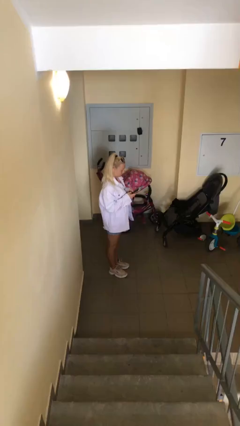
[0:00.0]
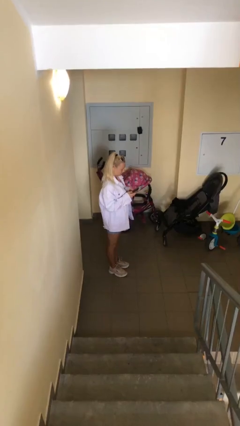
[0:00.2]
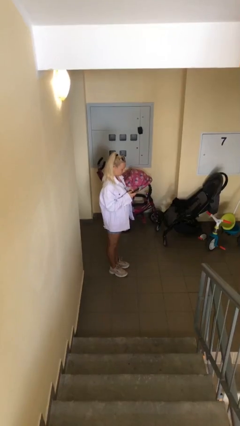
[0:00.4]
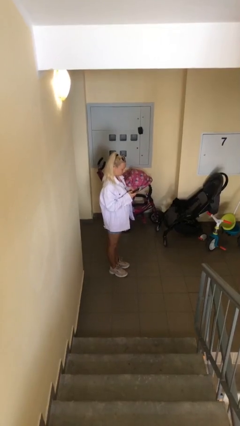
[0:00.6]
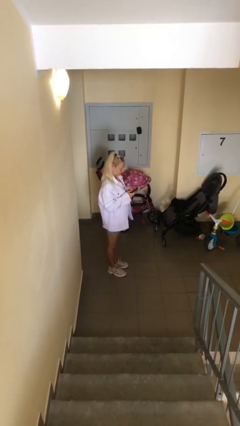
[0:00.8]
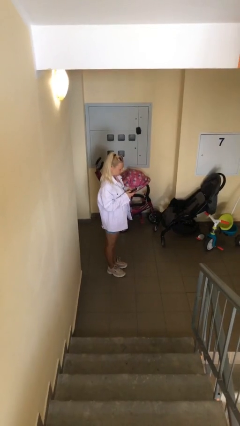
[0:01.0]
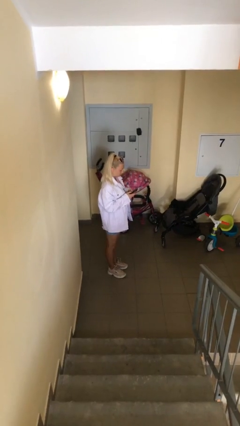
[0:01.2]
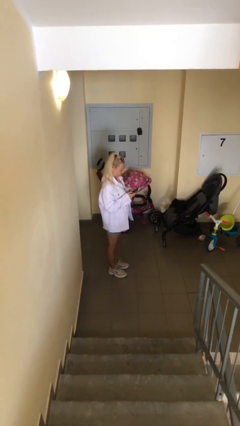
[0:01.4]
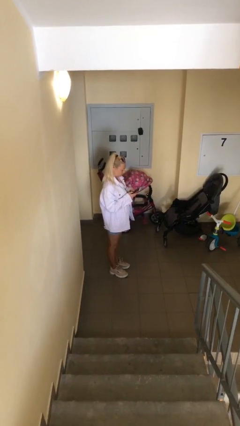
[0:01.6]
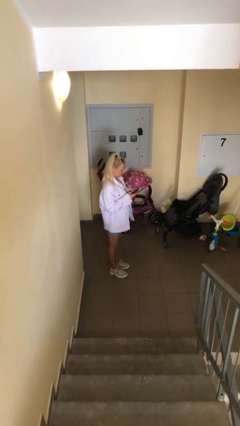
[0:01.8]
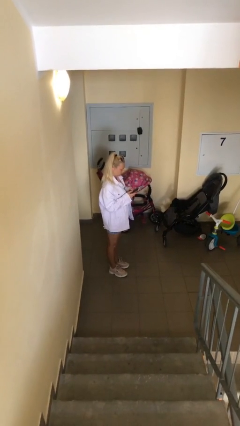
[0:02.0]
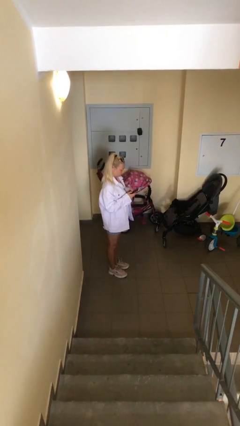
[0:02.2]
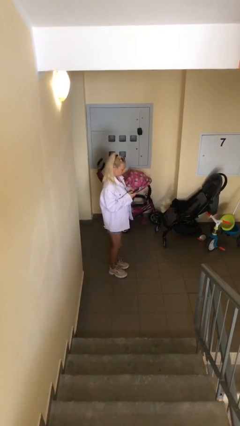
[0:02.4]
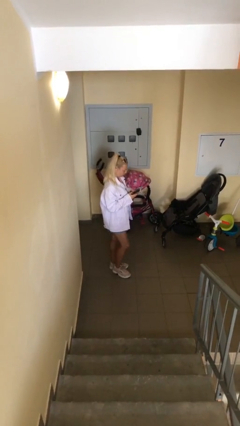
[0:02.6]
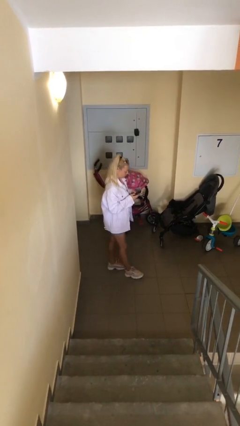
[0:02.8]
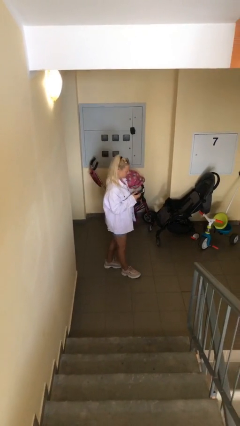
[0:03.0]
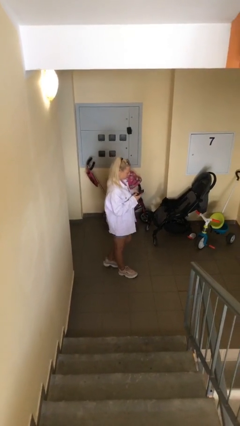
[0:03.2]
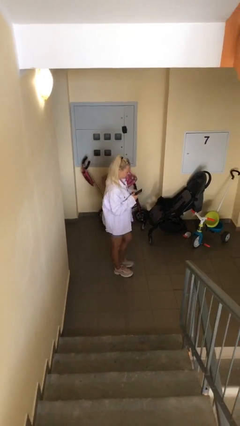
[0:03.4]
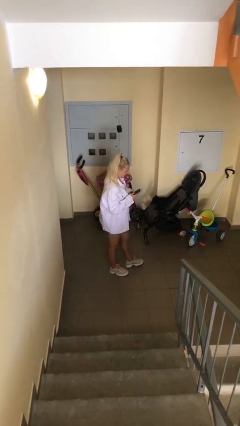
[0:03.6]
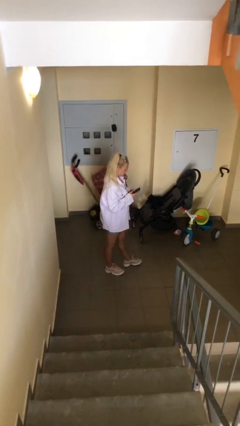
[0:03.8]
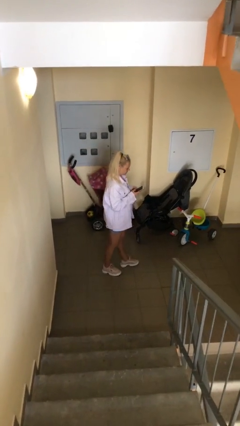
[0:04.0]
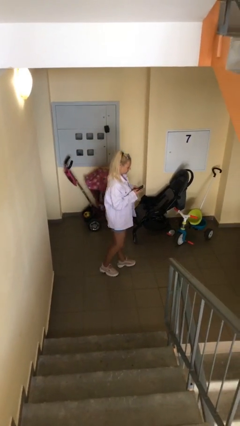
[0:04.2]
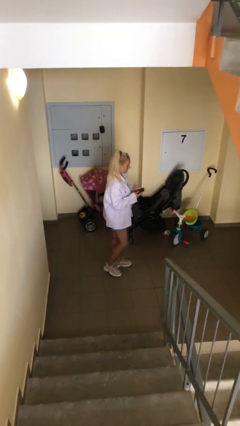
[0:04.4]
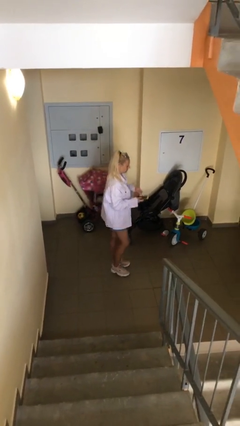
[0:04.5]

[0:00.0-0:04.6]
person texts on phone

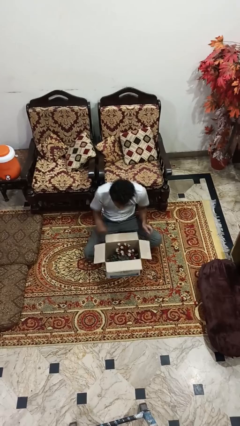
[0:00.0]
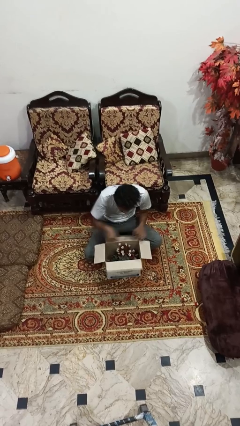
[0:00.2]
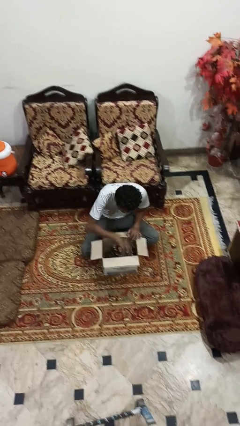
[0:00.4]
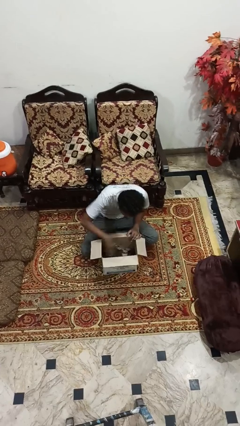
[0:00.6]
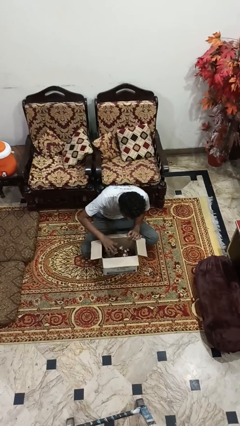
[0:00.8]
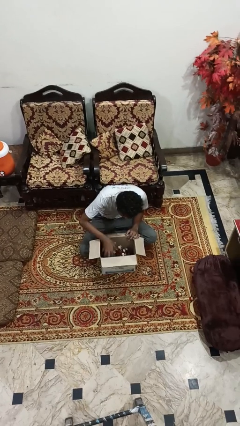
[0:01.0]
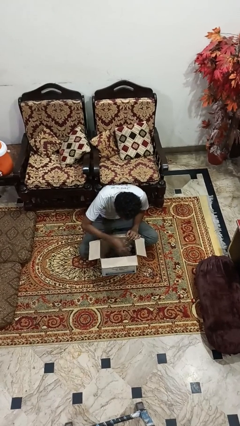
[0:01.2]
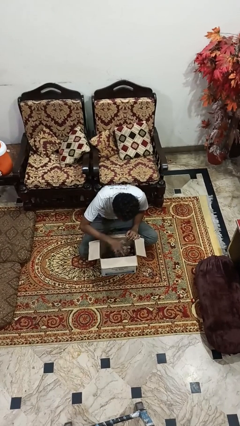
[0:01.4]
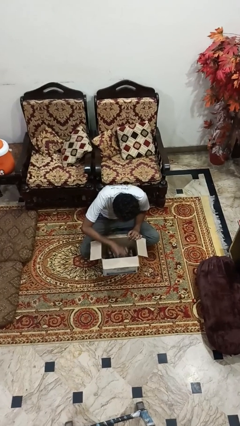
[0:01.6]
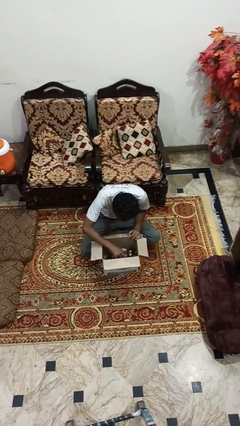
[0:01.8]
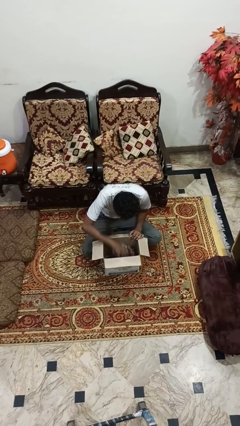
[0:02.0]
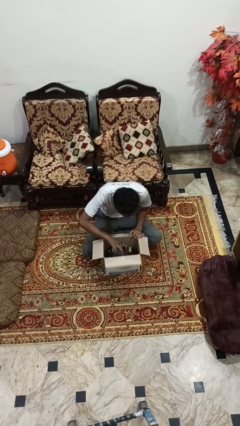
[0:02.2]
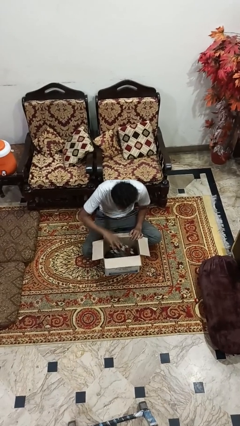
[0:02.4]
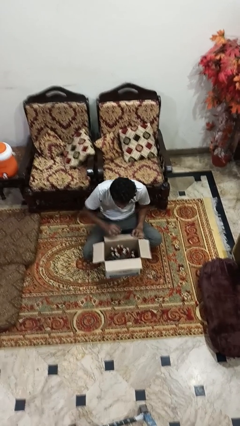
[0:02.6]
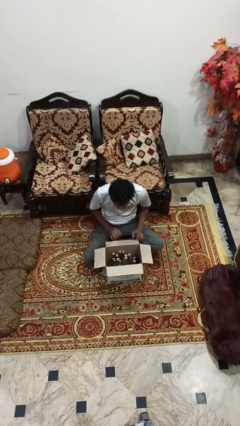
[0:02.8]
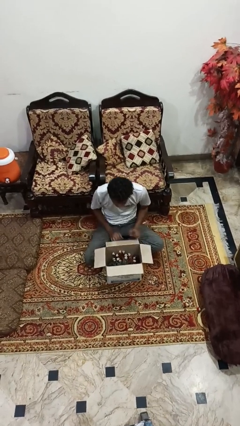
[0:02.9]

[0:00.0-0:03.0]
person searches in box

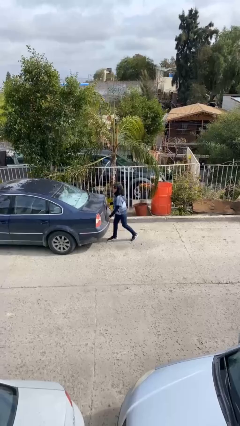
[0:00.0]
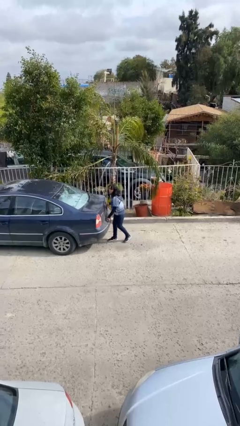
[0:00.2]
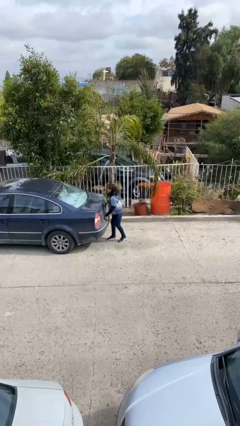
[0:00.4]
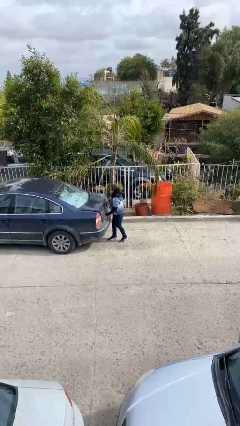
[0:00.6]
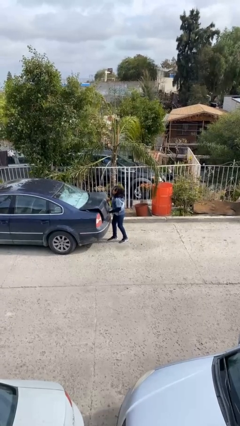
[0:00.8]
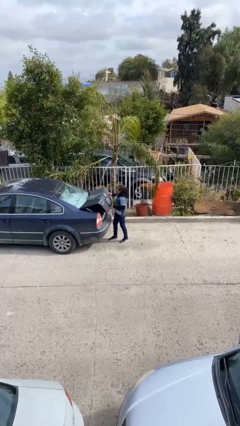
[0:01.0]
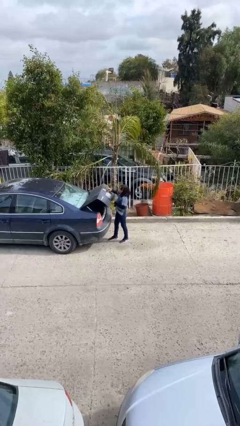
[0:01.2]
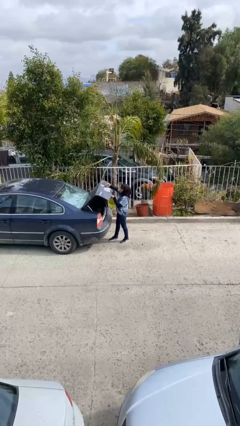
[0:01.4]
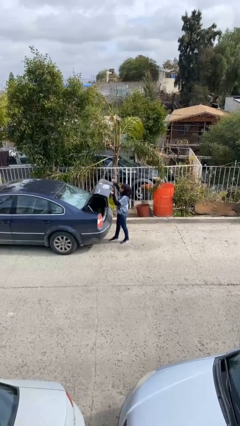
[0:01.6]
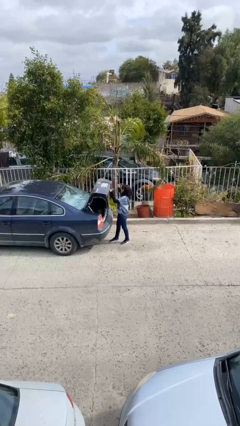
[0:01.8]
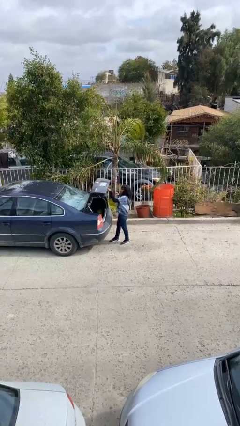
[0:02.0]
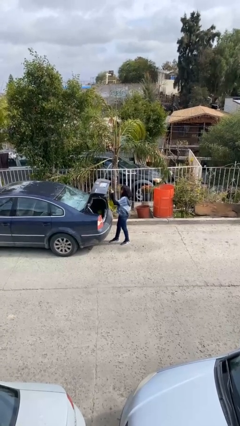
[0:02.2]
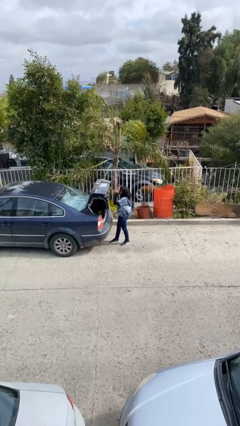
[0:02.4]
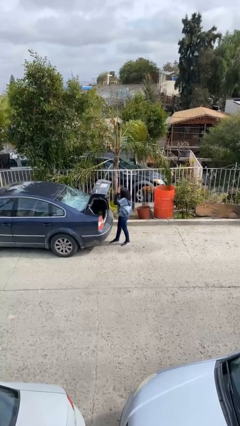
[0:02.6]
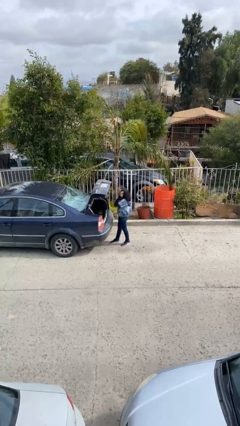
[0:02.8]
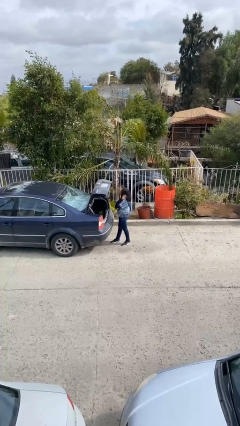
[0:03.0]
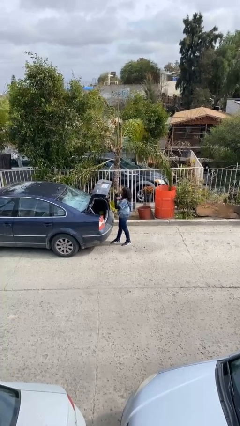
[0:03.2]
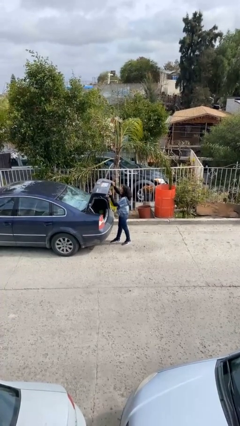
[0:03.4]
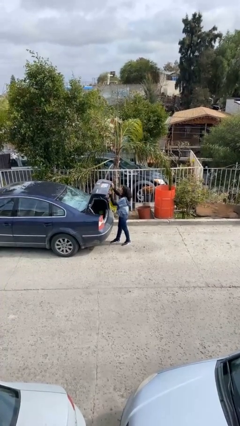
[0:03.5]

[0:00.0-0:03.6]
person opens car trunk

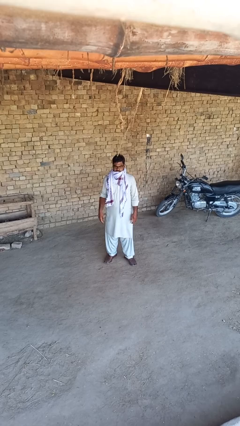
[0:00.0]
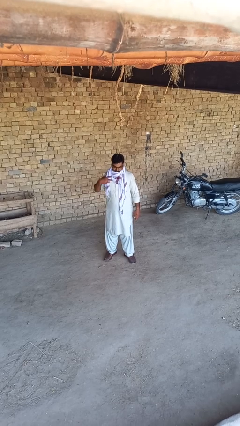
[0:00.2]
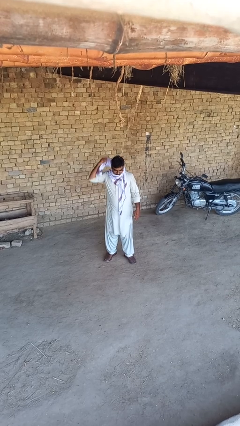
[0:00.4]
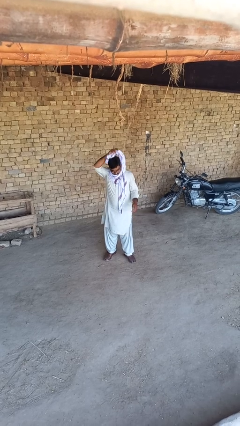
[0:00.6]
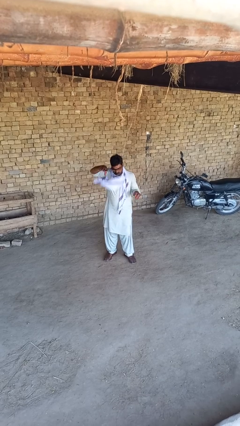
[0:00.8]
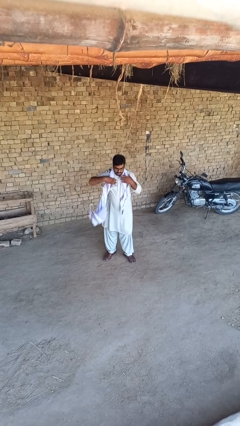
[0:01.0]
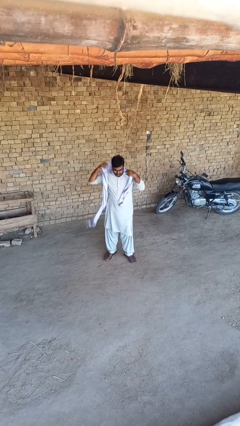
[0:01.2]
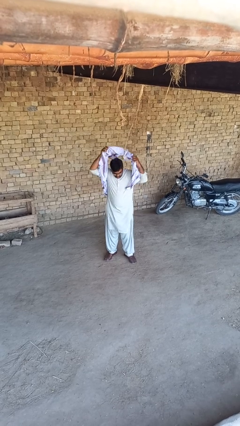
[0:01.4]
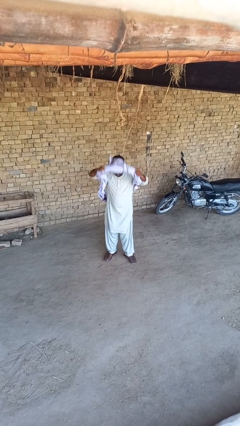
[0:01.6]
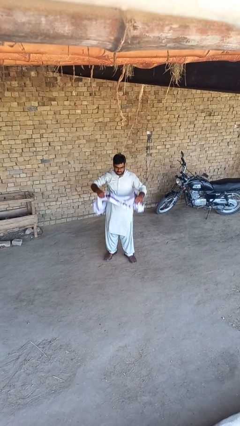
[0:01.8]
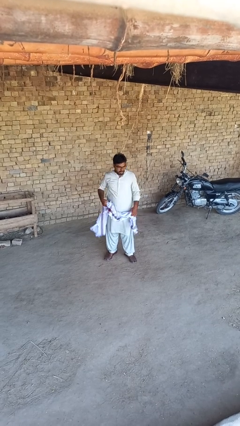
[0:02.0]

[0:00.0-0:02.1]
person takes off scarf

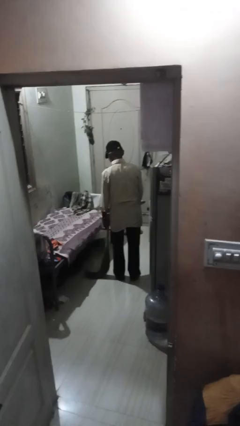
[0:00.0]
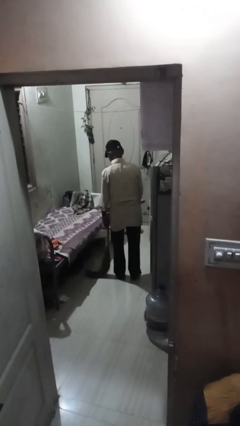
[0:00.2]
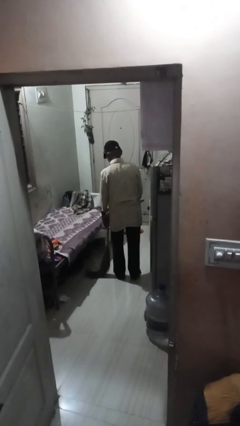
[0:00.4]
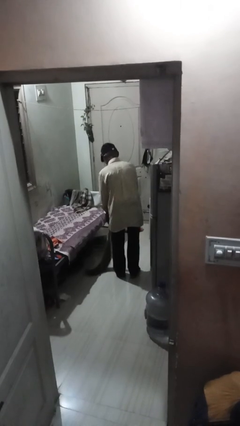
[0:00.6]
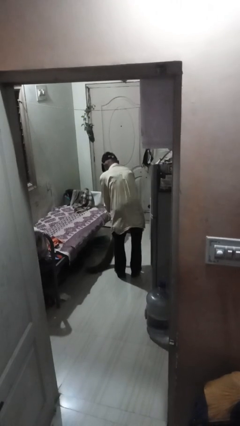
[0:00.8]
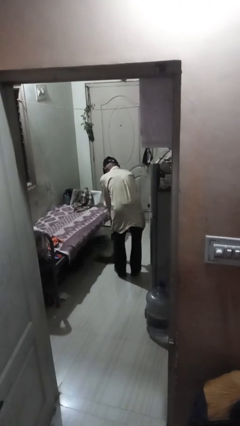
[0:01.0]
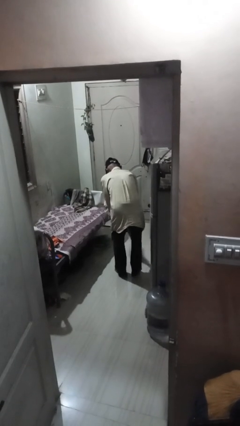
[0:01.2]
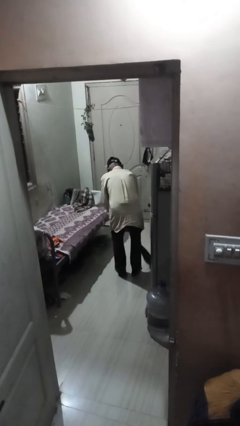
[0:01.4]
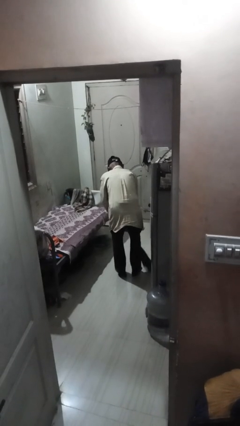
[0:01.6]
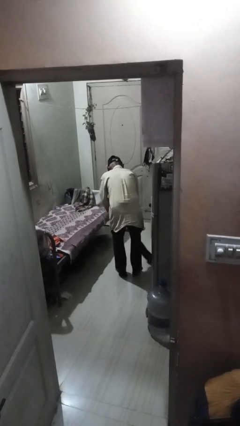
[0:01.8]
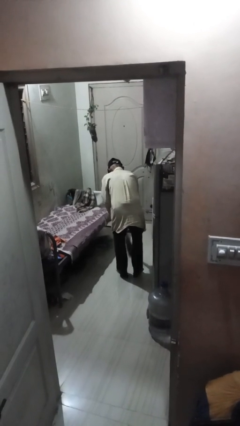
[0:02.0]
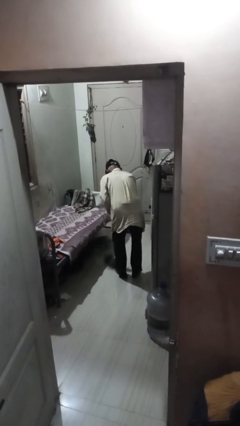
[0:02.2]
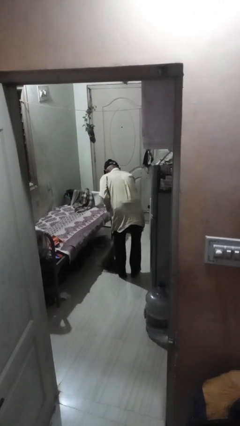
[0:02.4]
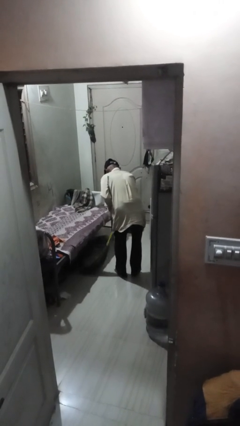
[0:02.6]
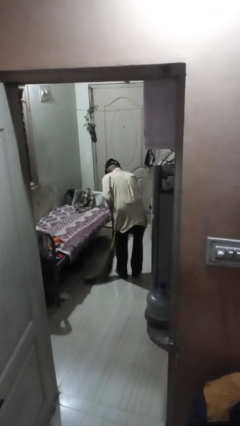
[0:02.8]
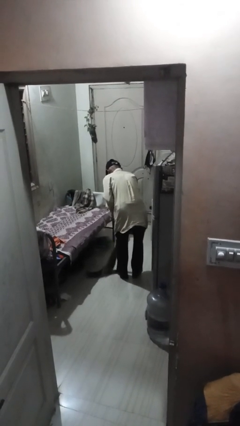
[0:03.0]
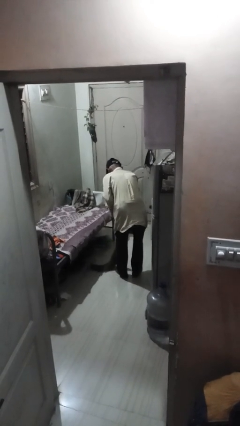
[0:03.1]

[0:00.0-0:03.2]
person sweeps floor

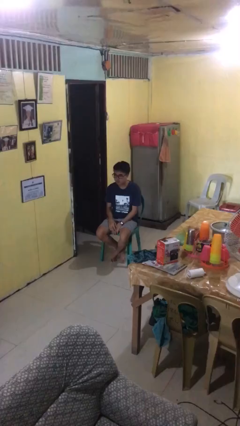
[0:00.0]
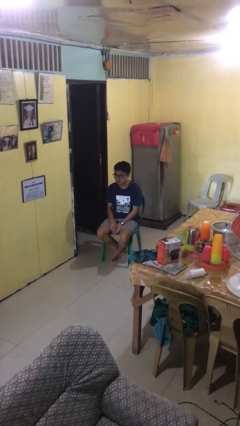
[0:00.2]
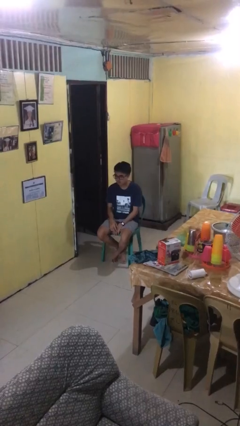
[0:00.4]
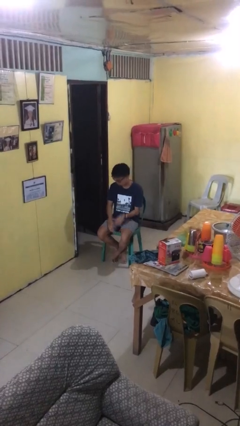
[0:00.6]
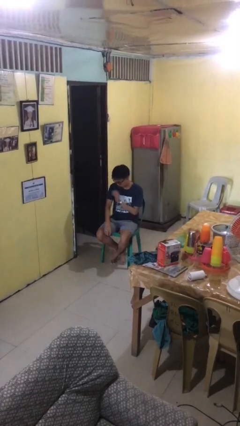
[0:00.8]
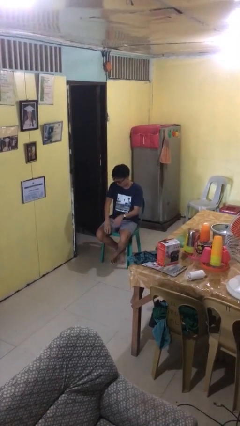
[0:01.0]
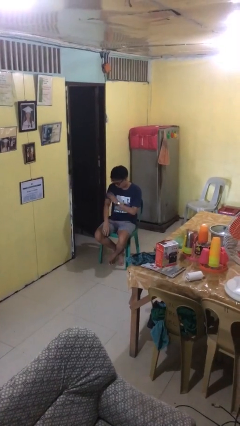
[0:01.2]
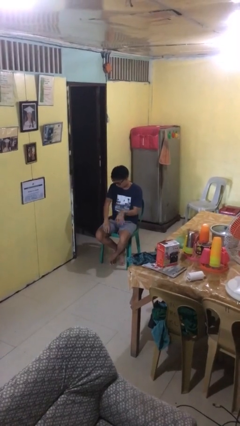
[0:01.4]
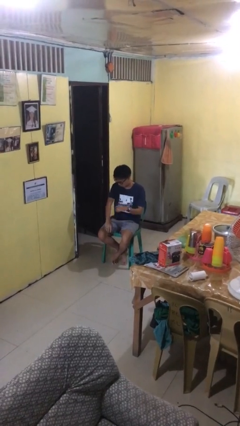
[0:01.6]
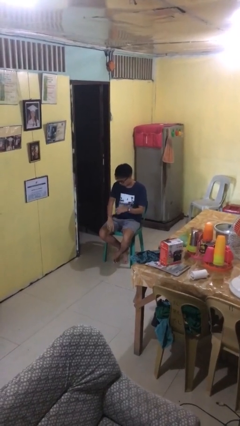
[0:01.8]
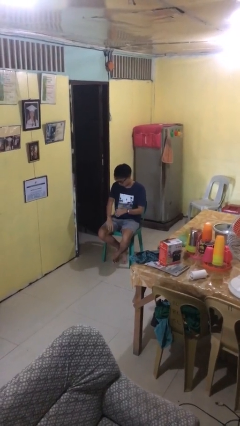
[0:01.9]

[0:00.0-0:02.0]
person swats bug
